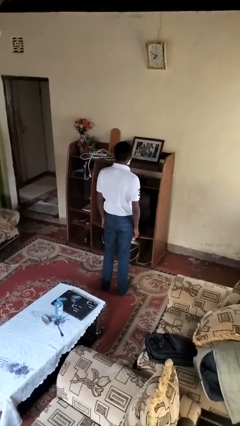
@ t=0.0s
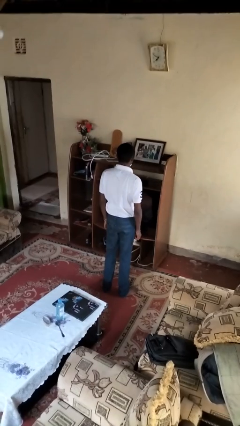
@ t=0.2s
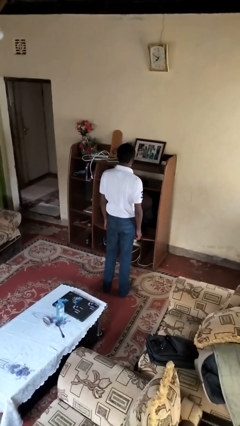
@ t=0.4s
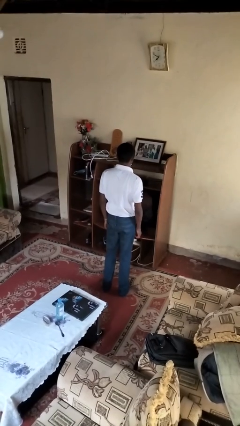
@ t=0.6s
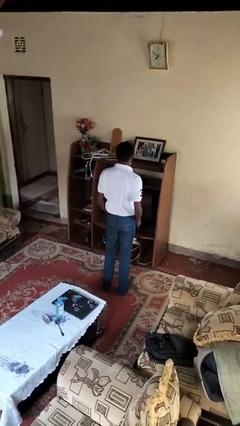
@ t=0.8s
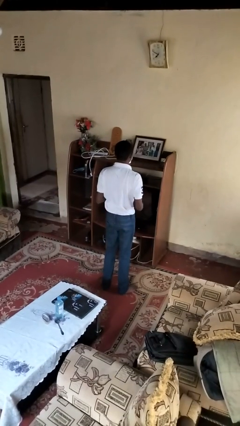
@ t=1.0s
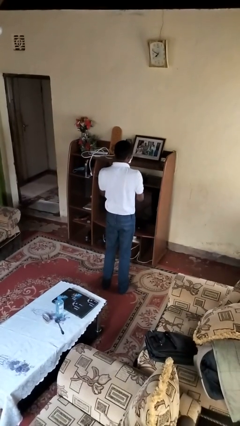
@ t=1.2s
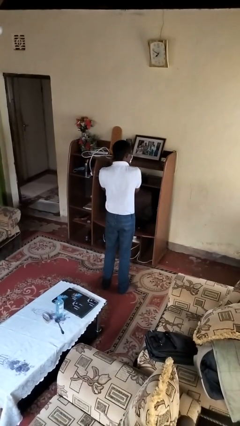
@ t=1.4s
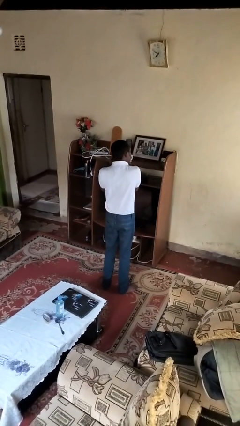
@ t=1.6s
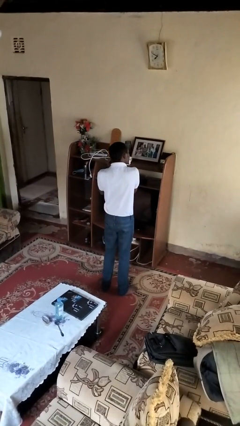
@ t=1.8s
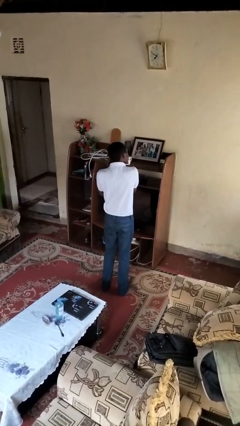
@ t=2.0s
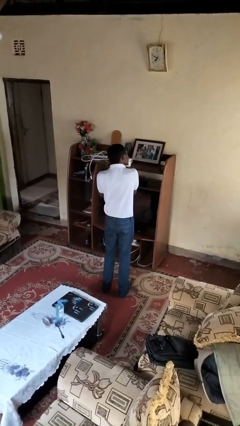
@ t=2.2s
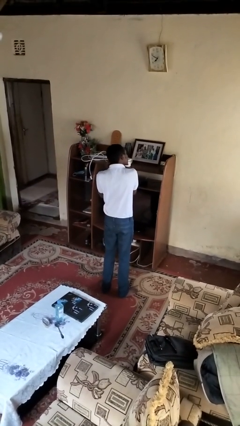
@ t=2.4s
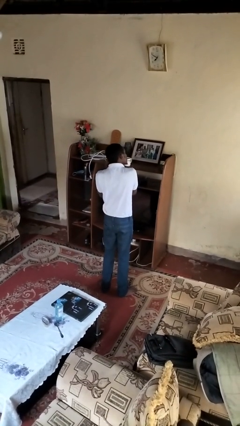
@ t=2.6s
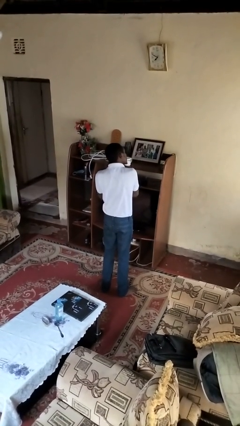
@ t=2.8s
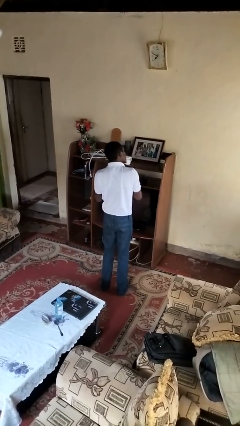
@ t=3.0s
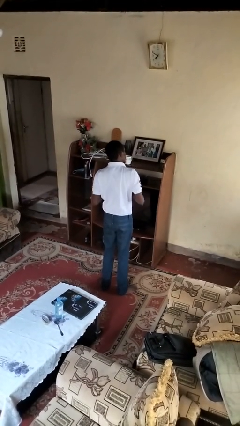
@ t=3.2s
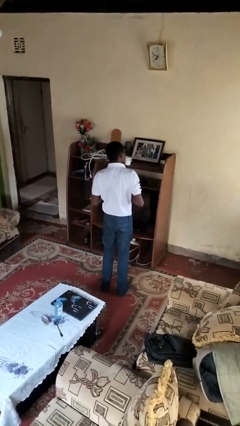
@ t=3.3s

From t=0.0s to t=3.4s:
person takes off earrings

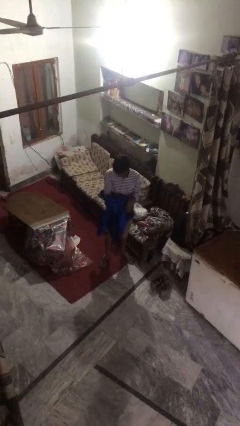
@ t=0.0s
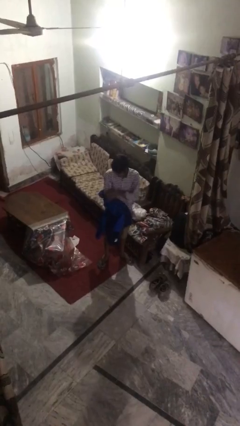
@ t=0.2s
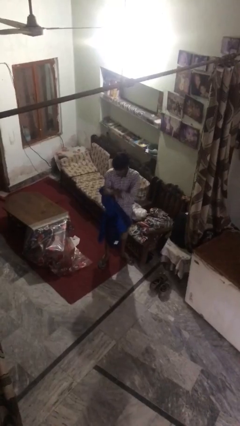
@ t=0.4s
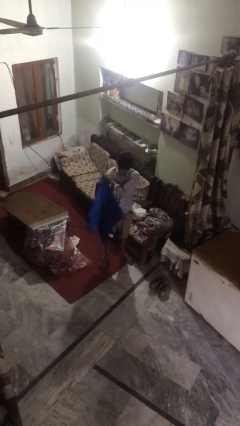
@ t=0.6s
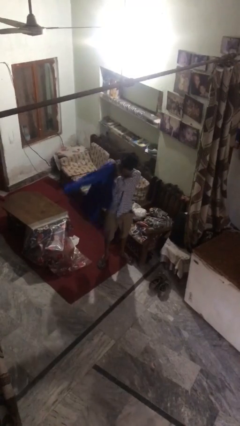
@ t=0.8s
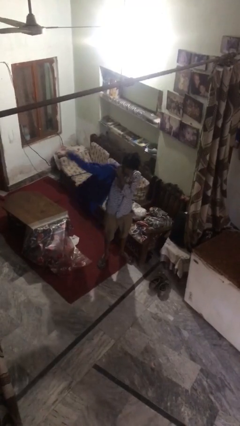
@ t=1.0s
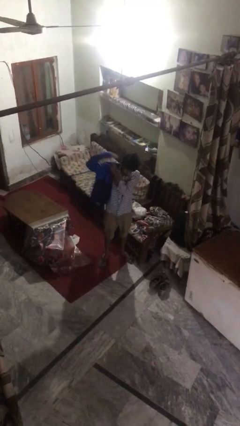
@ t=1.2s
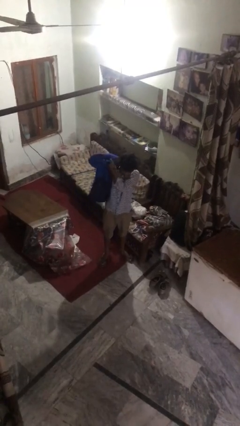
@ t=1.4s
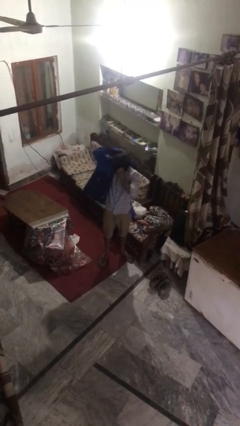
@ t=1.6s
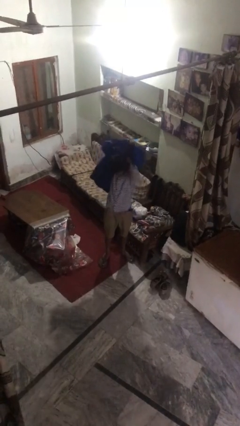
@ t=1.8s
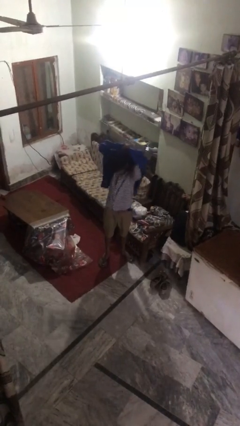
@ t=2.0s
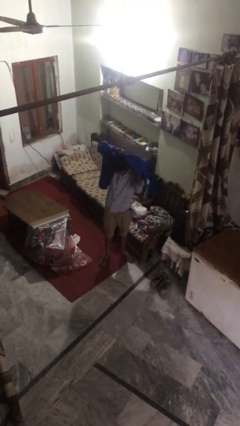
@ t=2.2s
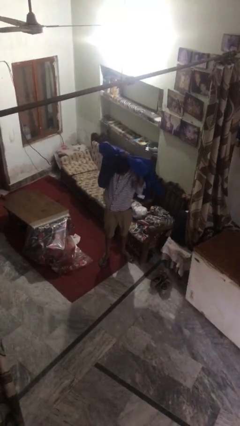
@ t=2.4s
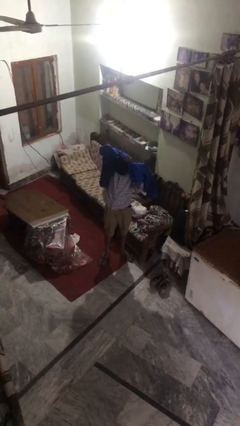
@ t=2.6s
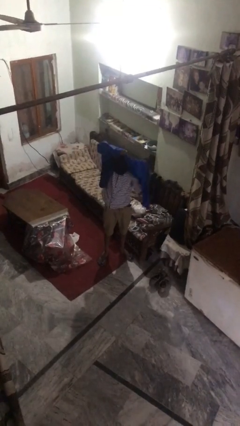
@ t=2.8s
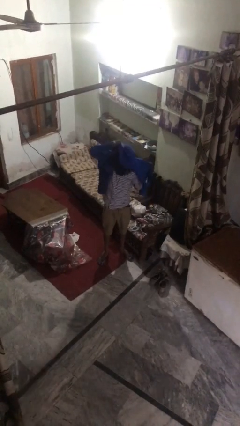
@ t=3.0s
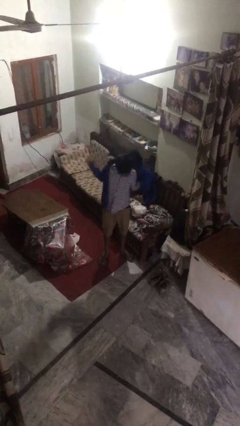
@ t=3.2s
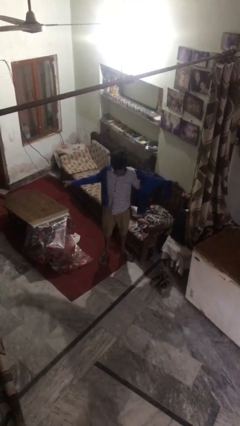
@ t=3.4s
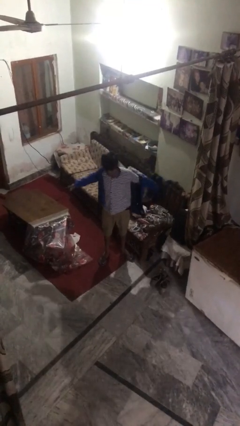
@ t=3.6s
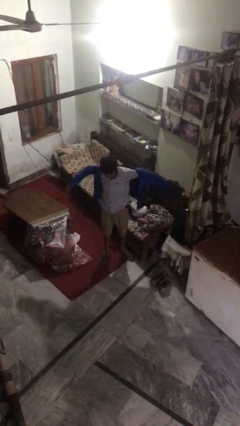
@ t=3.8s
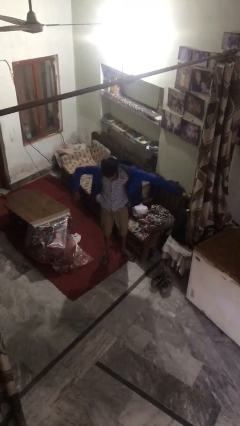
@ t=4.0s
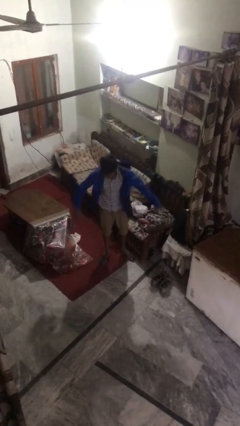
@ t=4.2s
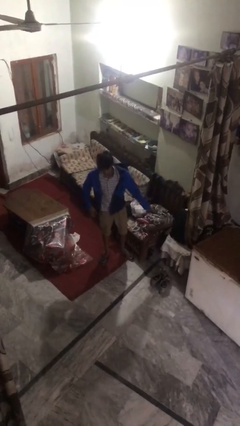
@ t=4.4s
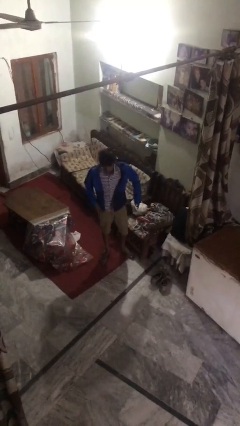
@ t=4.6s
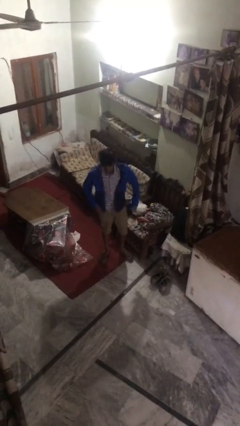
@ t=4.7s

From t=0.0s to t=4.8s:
person puts on jacket

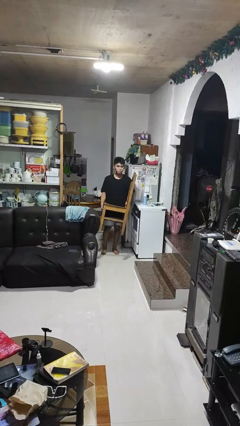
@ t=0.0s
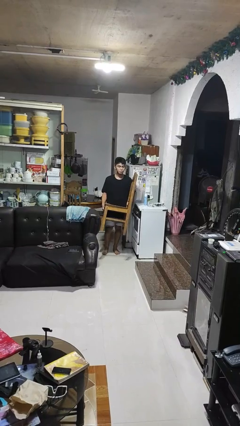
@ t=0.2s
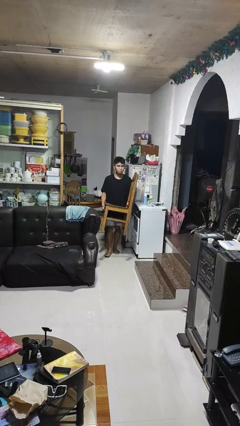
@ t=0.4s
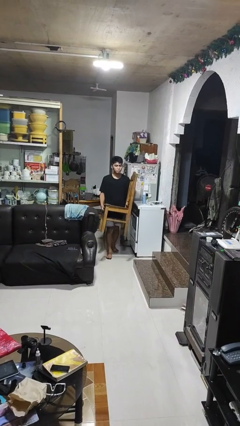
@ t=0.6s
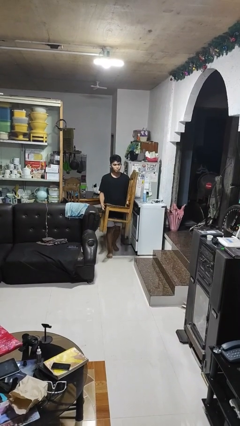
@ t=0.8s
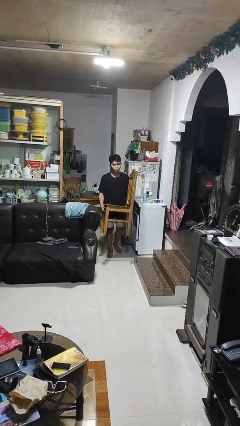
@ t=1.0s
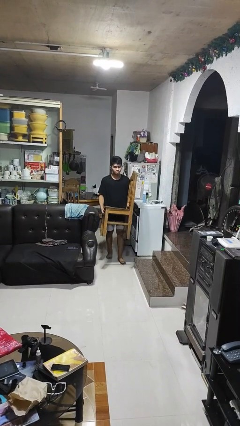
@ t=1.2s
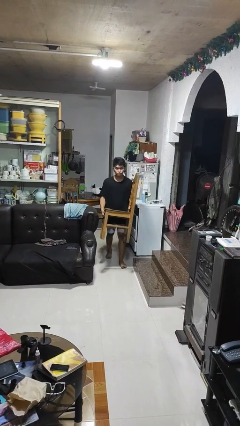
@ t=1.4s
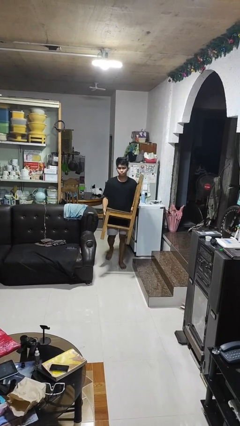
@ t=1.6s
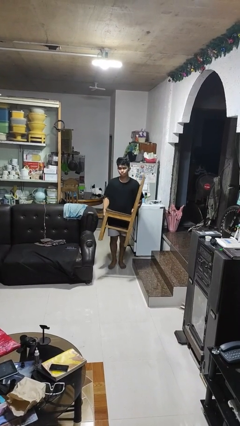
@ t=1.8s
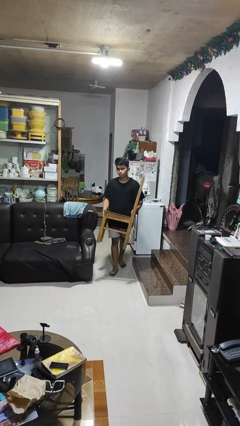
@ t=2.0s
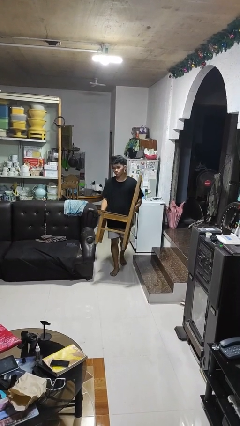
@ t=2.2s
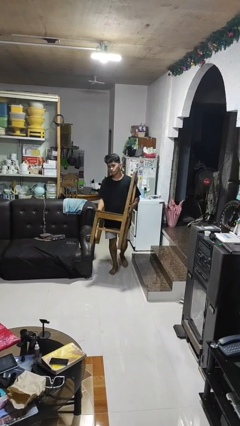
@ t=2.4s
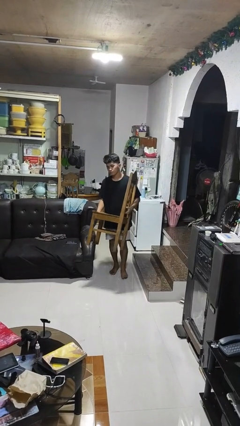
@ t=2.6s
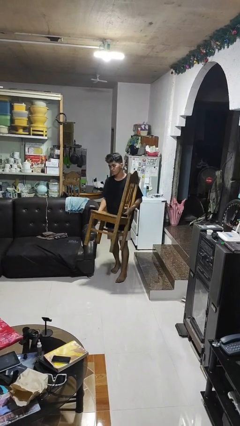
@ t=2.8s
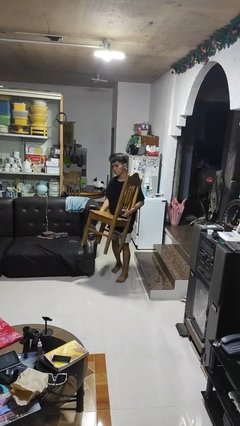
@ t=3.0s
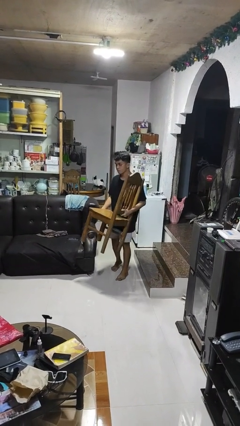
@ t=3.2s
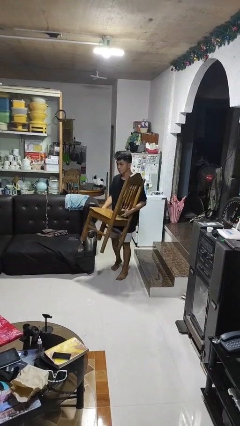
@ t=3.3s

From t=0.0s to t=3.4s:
person carries furniture

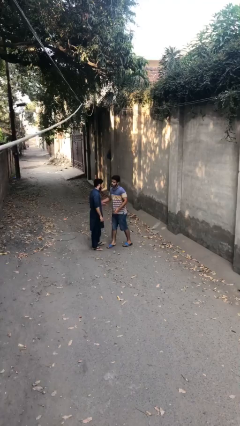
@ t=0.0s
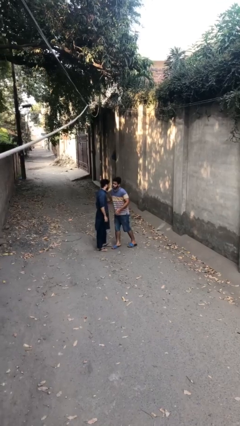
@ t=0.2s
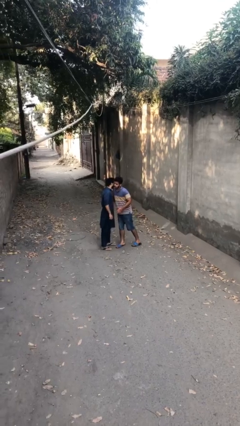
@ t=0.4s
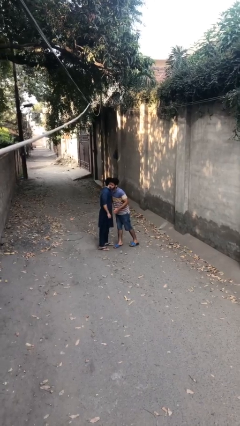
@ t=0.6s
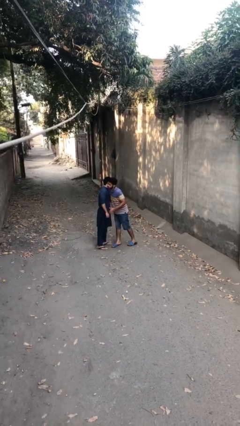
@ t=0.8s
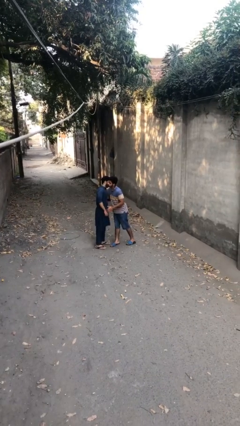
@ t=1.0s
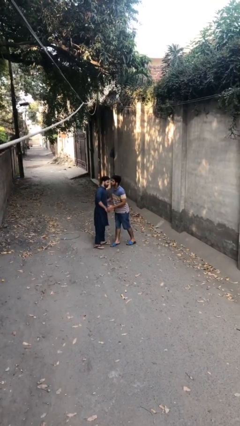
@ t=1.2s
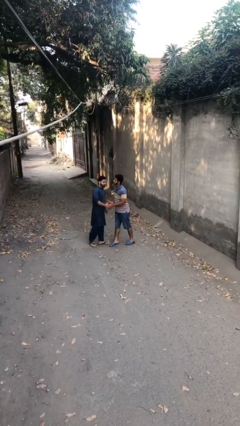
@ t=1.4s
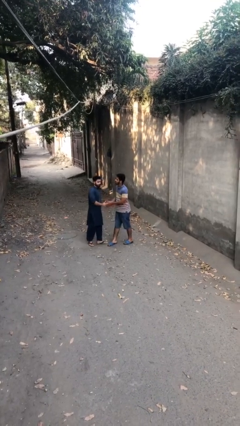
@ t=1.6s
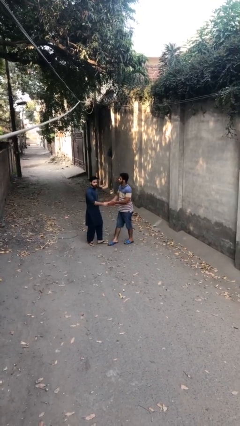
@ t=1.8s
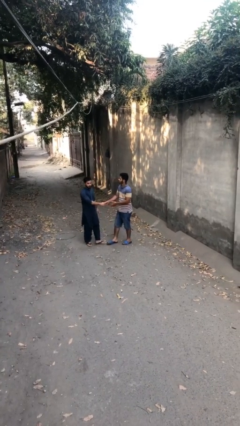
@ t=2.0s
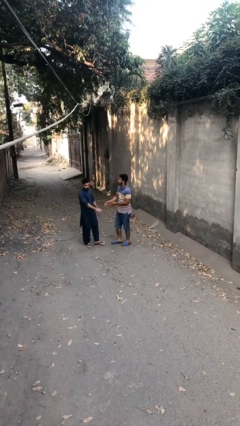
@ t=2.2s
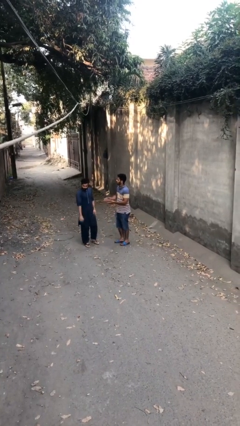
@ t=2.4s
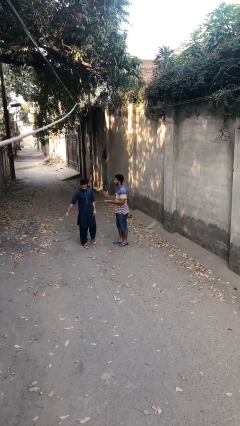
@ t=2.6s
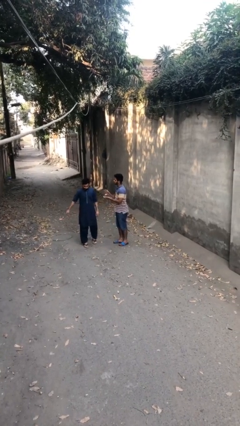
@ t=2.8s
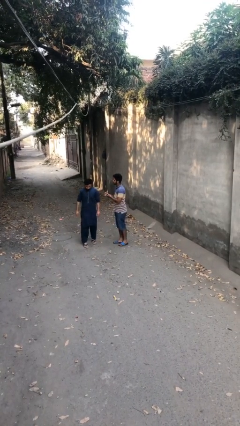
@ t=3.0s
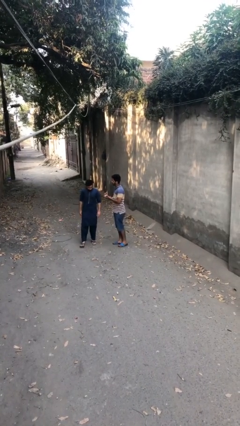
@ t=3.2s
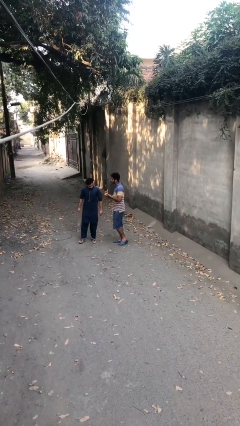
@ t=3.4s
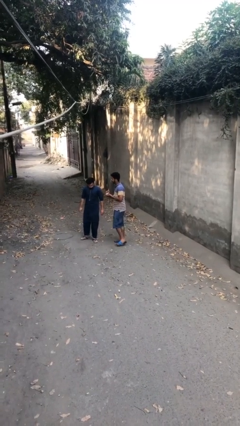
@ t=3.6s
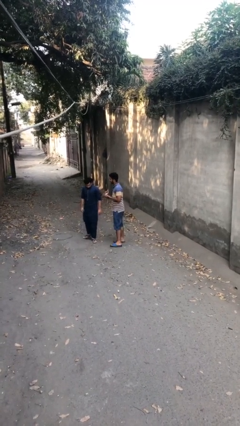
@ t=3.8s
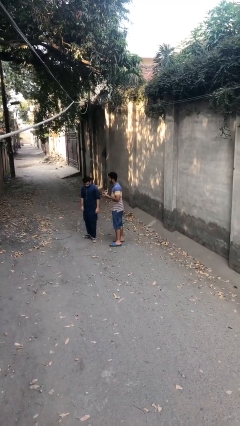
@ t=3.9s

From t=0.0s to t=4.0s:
person embraces person

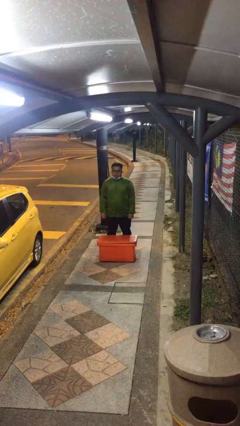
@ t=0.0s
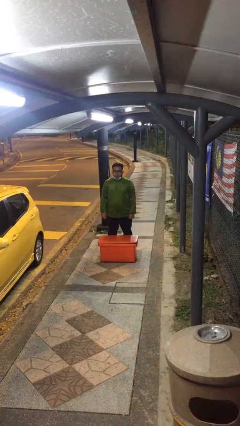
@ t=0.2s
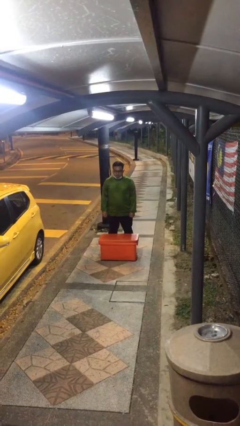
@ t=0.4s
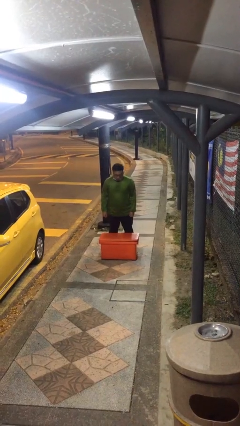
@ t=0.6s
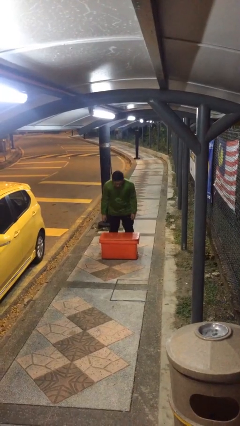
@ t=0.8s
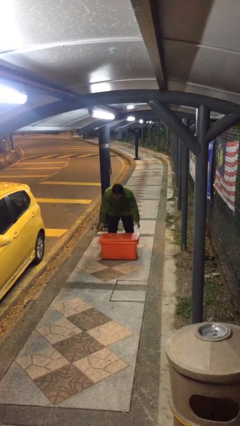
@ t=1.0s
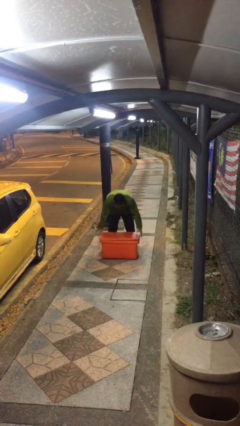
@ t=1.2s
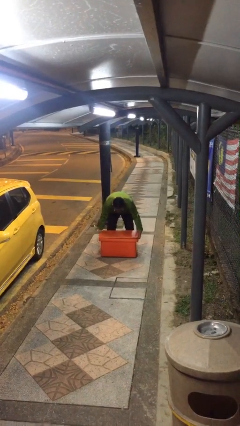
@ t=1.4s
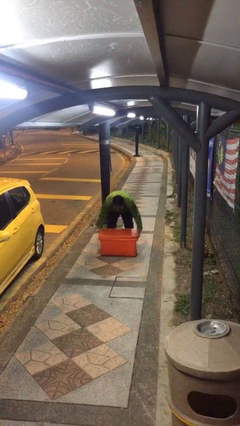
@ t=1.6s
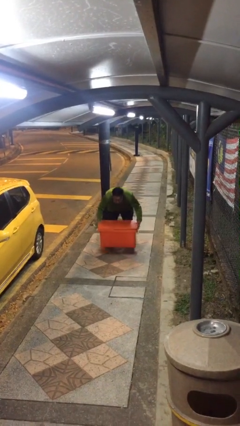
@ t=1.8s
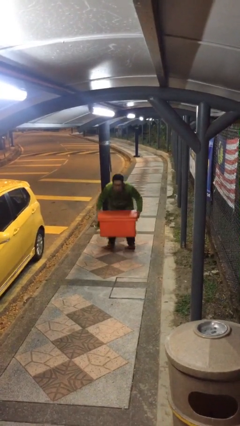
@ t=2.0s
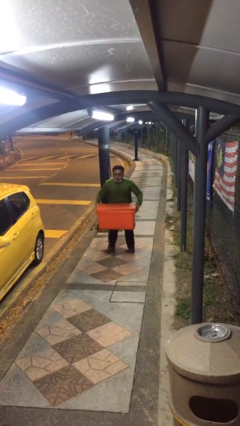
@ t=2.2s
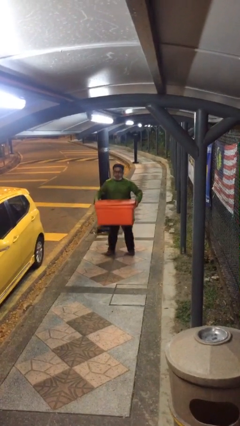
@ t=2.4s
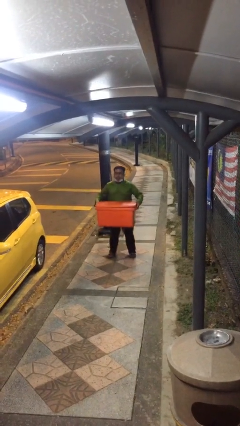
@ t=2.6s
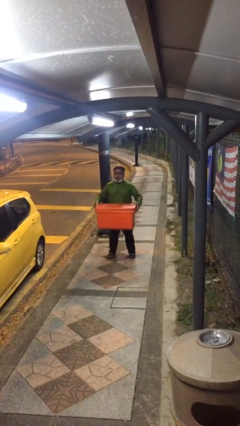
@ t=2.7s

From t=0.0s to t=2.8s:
person picks up object from floor
